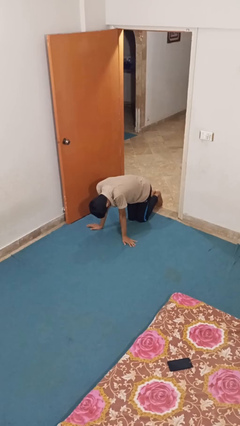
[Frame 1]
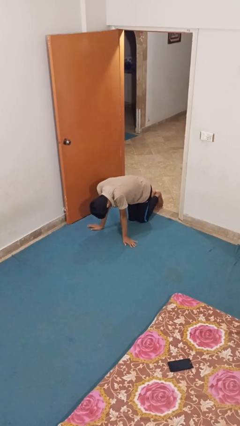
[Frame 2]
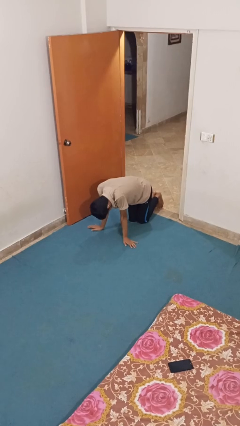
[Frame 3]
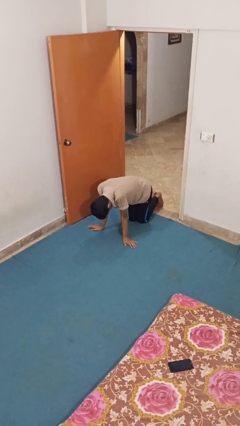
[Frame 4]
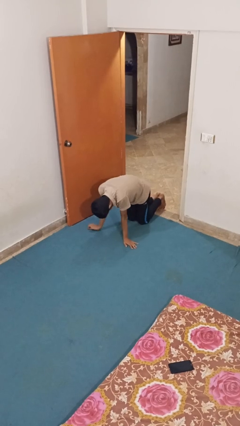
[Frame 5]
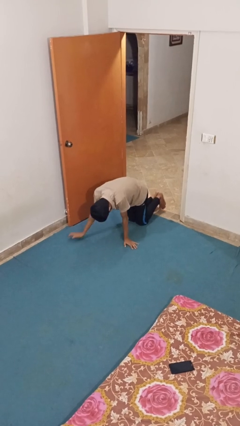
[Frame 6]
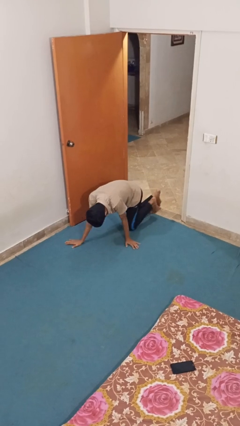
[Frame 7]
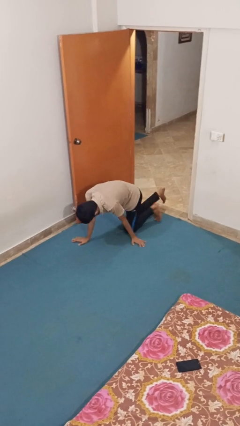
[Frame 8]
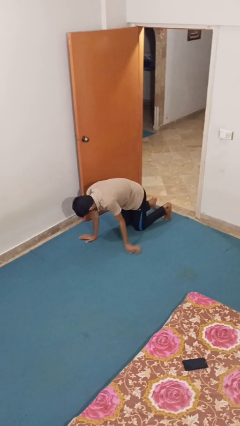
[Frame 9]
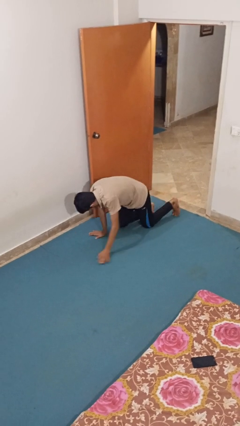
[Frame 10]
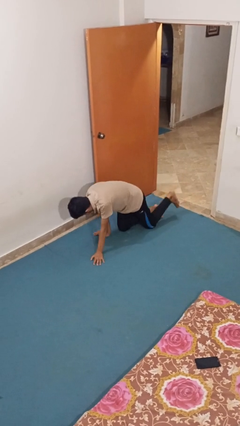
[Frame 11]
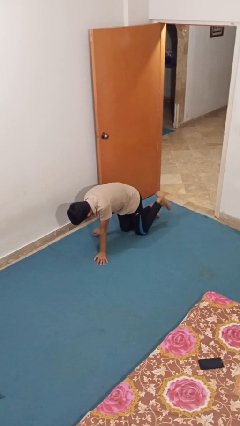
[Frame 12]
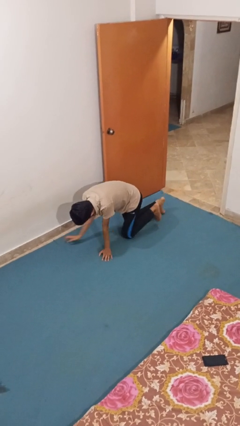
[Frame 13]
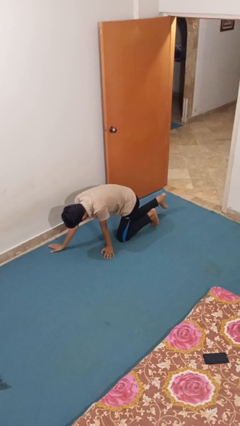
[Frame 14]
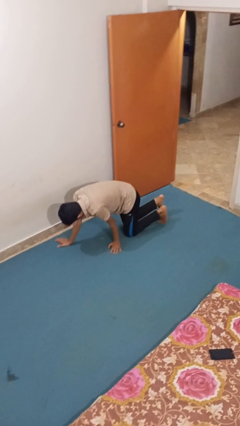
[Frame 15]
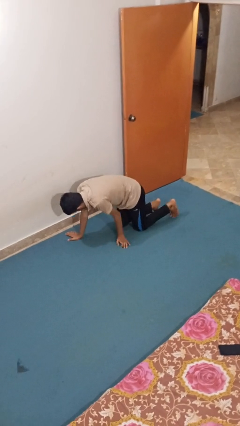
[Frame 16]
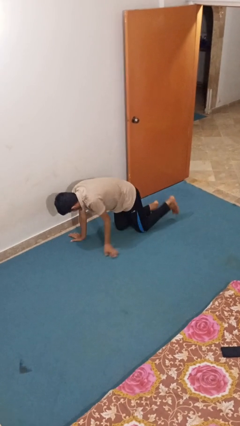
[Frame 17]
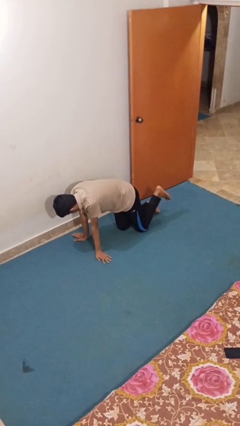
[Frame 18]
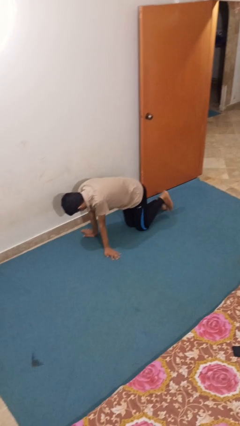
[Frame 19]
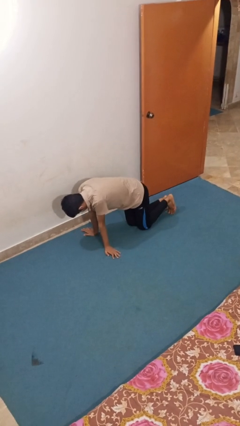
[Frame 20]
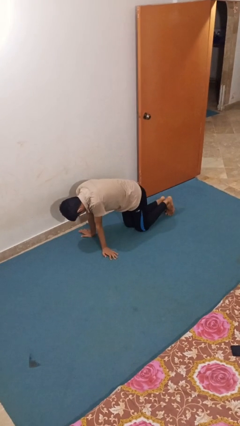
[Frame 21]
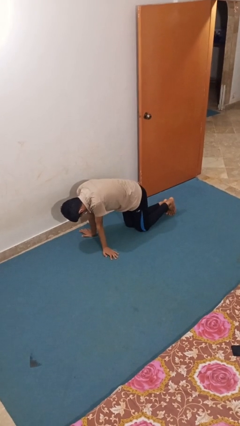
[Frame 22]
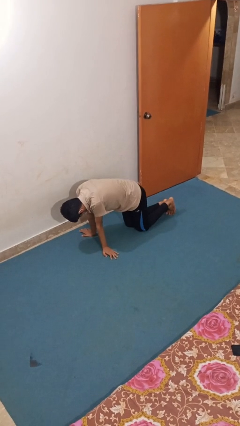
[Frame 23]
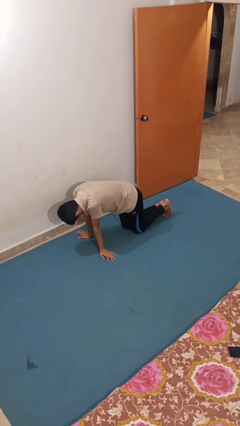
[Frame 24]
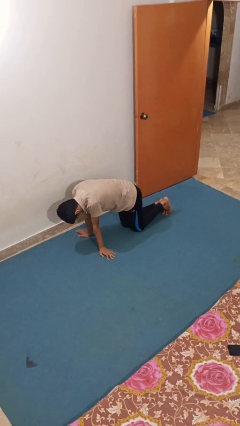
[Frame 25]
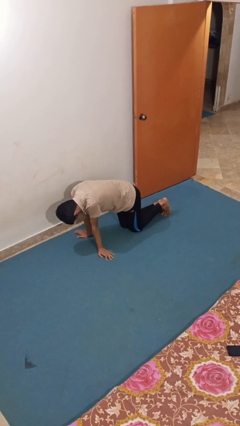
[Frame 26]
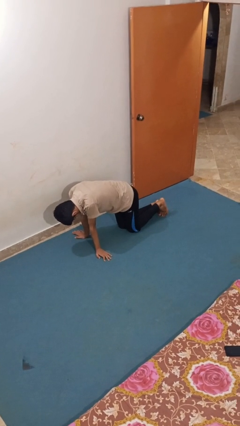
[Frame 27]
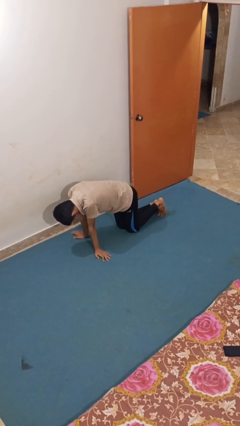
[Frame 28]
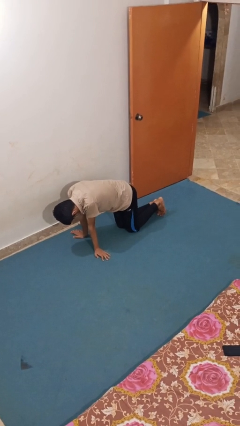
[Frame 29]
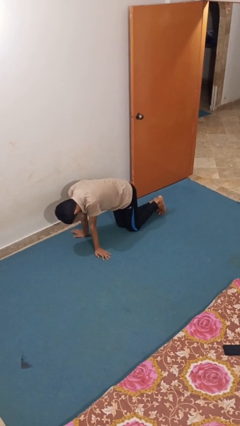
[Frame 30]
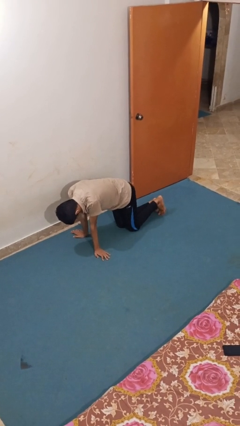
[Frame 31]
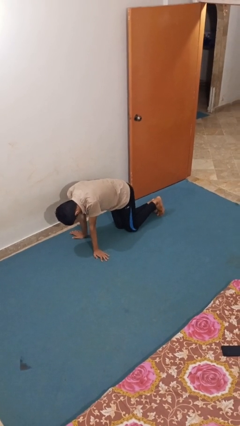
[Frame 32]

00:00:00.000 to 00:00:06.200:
person crawls

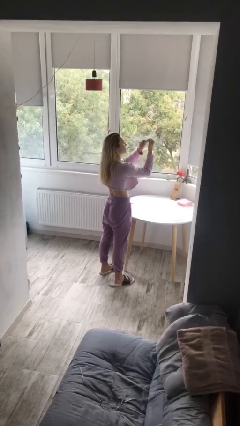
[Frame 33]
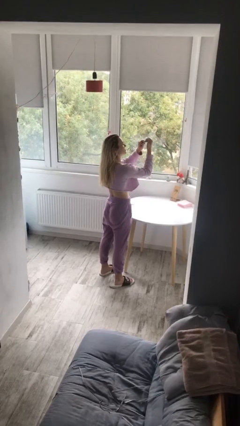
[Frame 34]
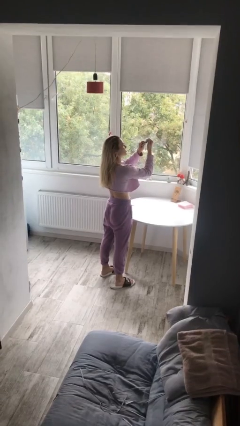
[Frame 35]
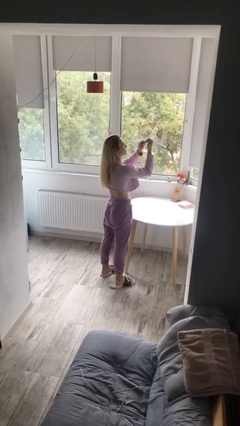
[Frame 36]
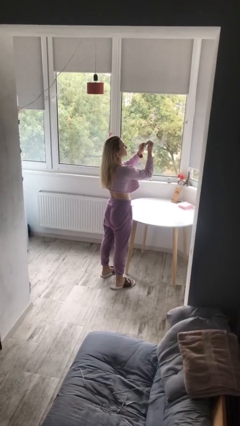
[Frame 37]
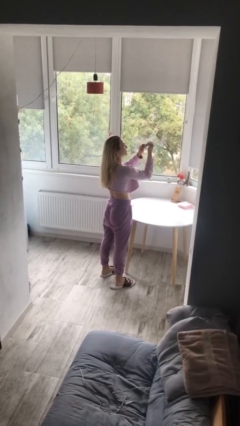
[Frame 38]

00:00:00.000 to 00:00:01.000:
person files fingernails

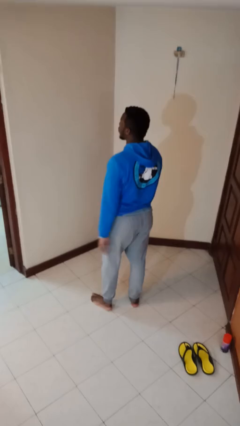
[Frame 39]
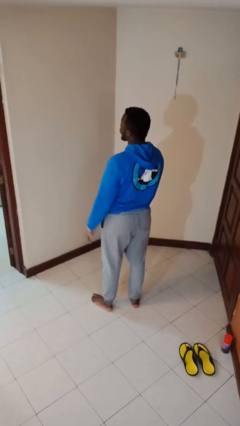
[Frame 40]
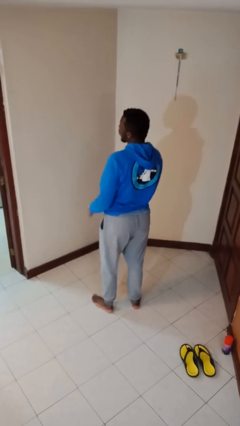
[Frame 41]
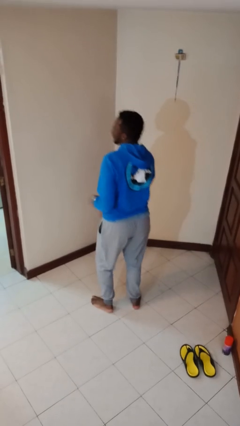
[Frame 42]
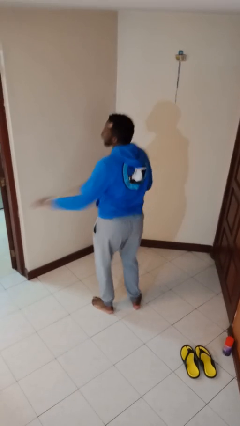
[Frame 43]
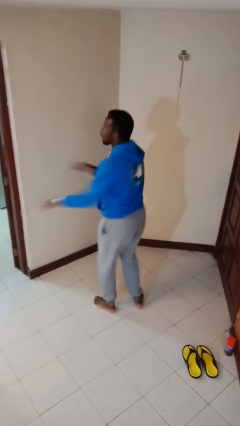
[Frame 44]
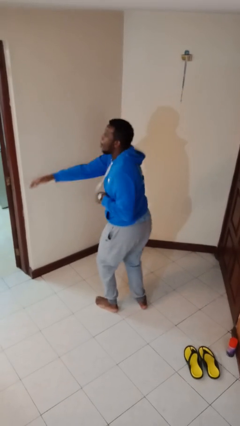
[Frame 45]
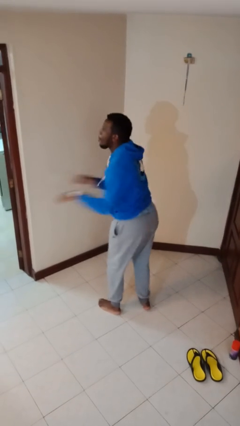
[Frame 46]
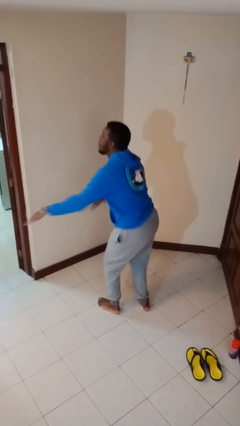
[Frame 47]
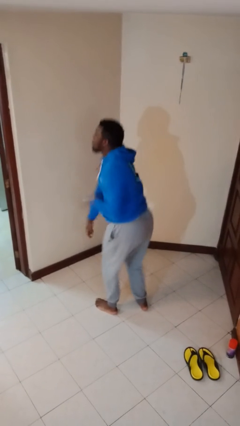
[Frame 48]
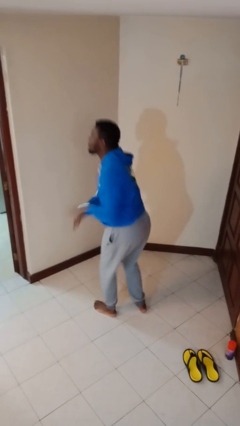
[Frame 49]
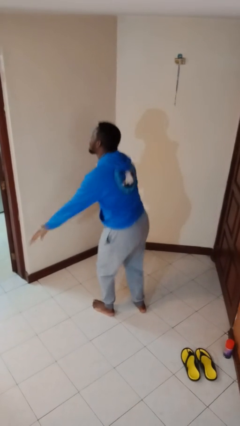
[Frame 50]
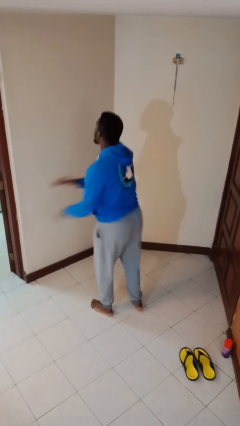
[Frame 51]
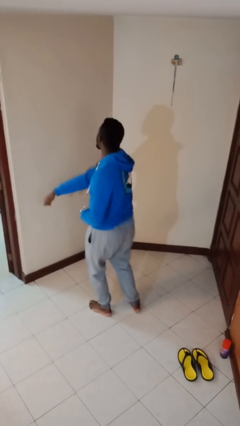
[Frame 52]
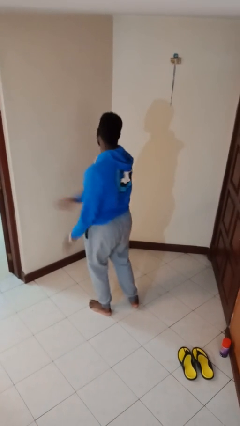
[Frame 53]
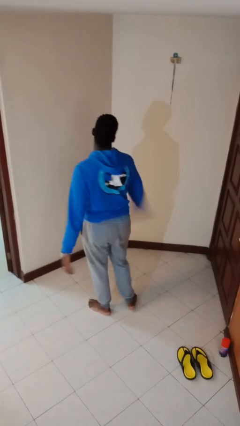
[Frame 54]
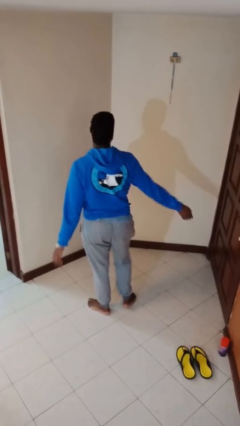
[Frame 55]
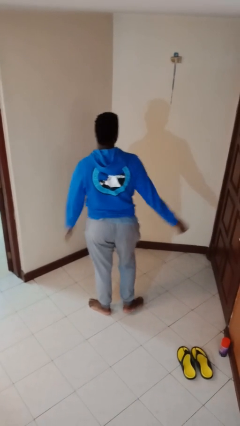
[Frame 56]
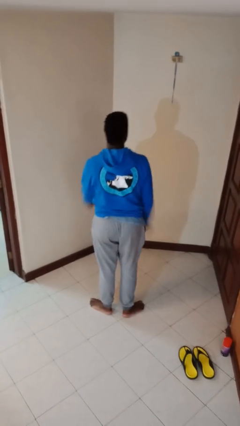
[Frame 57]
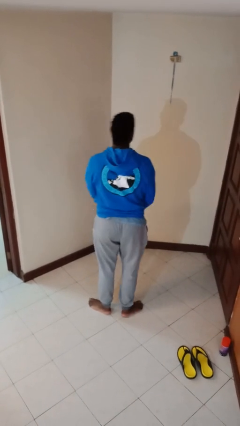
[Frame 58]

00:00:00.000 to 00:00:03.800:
person dances in place

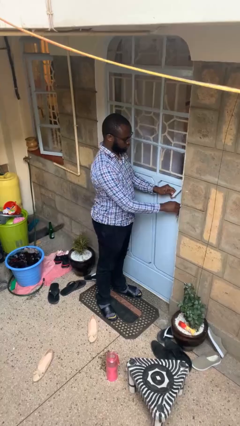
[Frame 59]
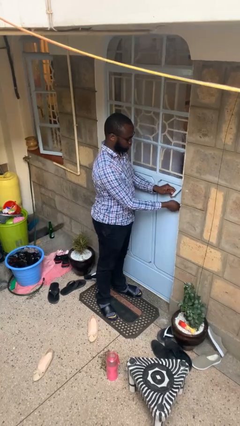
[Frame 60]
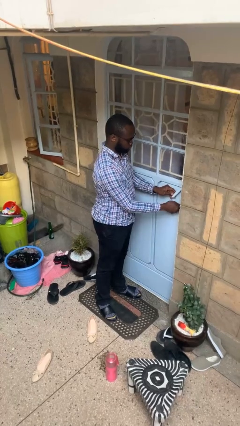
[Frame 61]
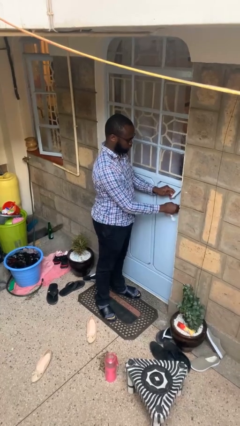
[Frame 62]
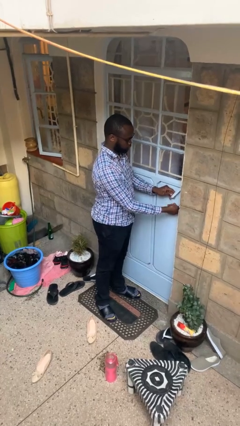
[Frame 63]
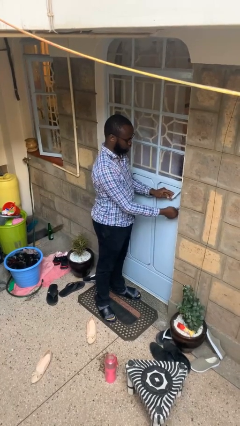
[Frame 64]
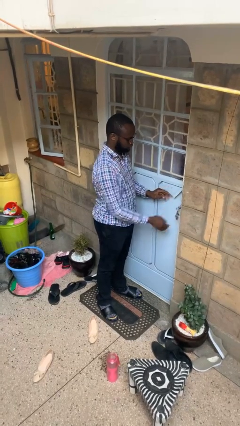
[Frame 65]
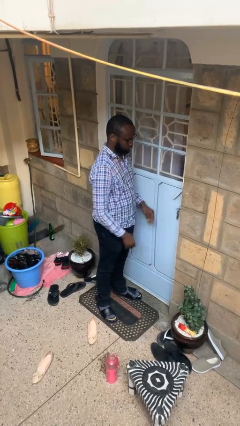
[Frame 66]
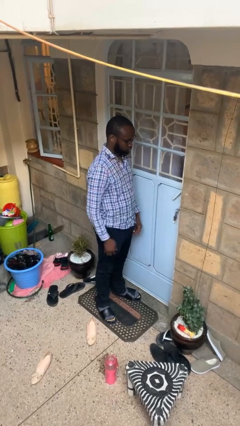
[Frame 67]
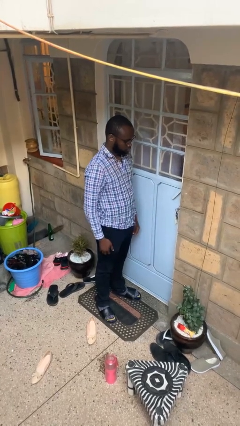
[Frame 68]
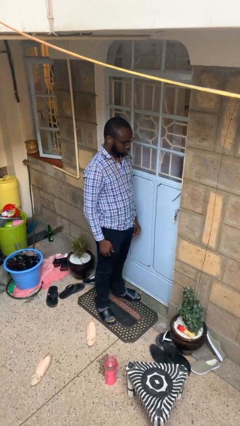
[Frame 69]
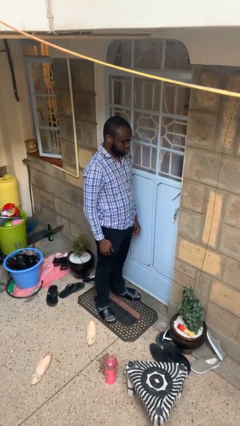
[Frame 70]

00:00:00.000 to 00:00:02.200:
person locks door with keys

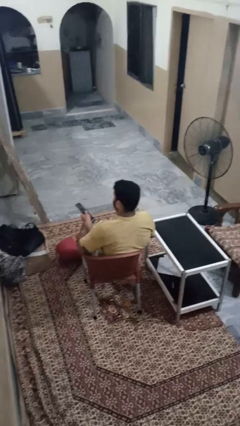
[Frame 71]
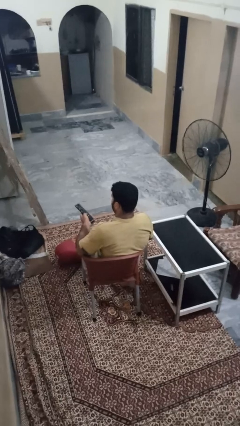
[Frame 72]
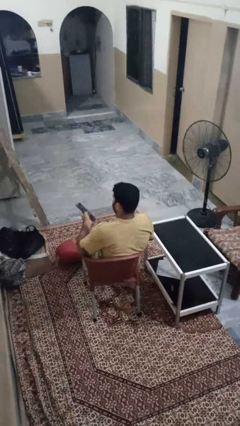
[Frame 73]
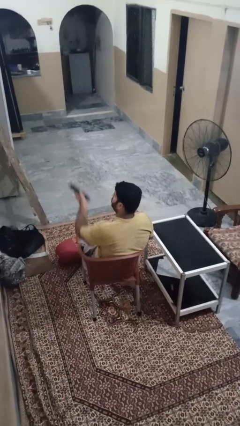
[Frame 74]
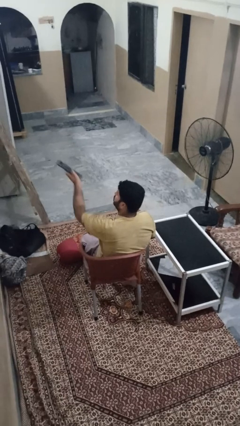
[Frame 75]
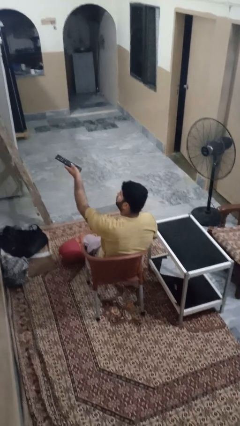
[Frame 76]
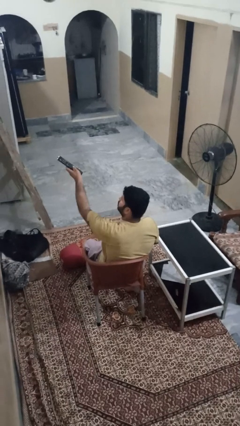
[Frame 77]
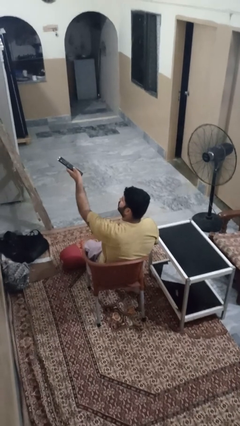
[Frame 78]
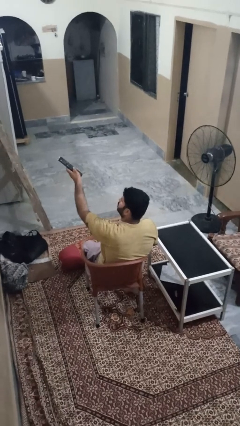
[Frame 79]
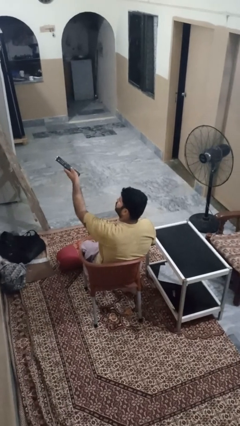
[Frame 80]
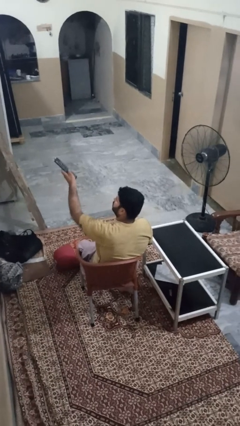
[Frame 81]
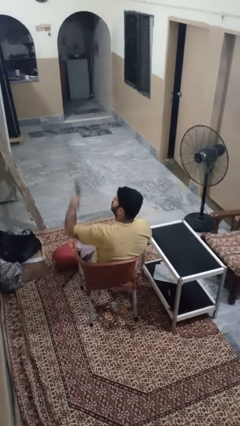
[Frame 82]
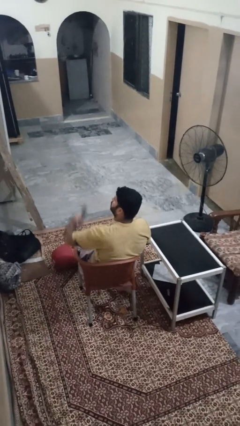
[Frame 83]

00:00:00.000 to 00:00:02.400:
person uses television remote

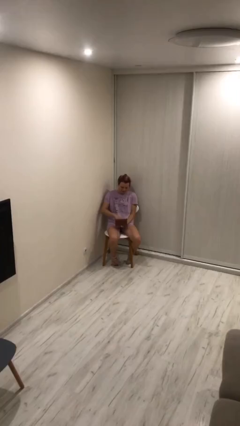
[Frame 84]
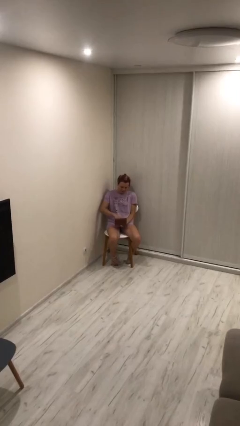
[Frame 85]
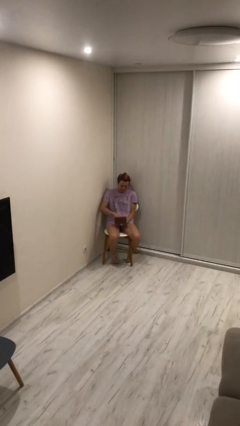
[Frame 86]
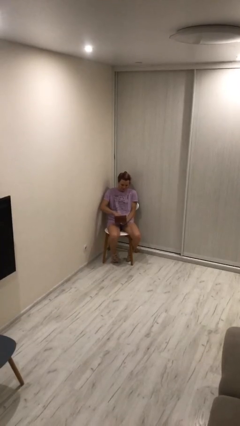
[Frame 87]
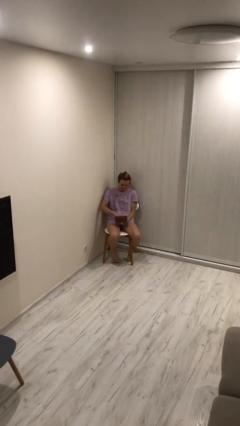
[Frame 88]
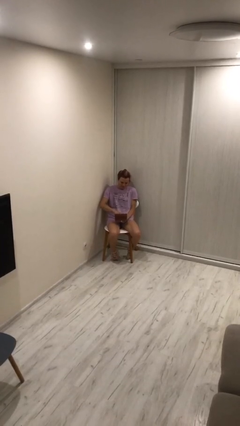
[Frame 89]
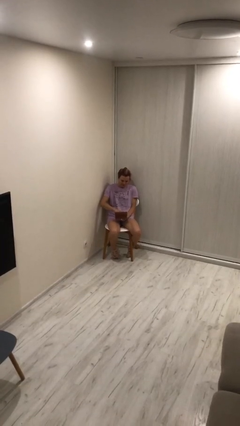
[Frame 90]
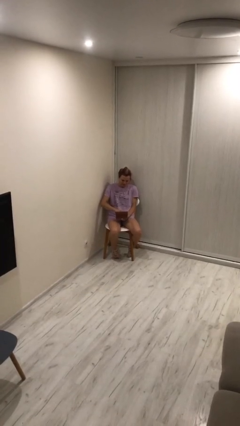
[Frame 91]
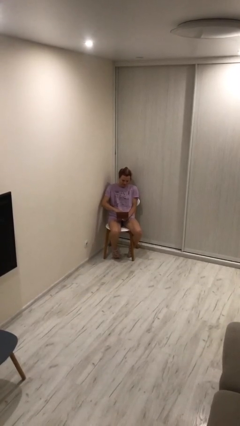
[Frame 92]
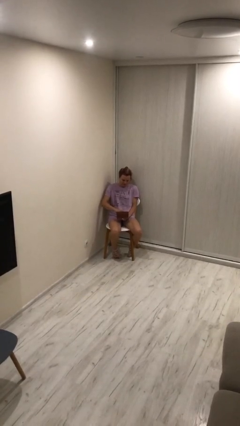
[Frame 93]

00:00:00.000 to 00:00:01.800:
person searches jewelry box
